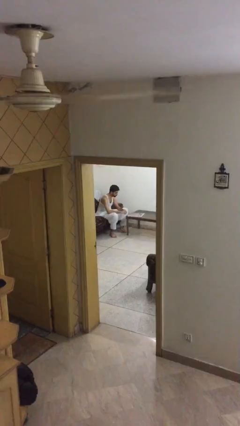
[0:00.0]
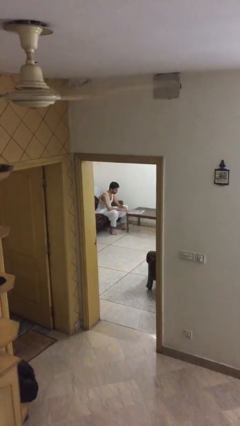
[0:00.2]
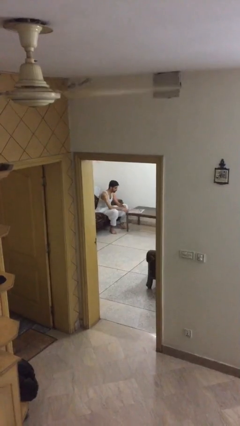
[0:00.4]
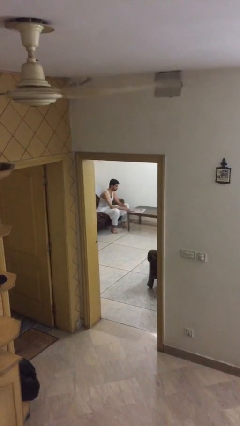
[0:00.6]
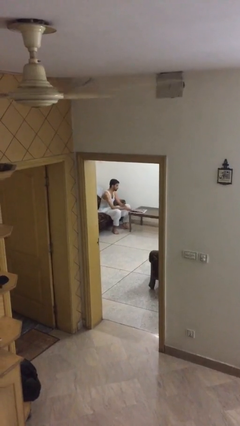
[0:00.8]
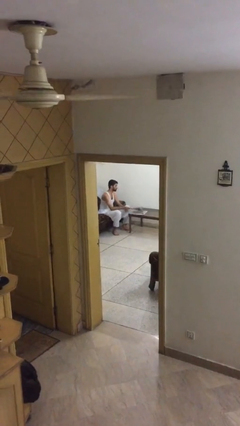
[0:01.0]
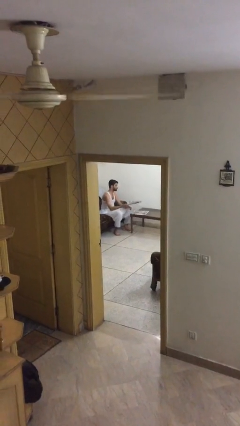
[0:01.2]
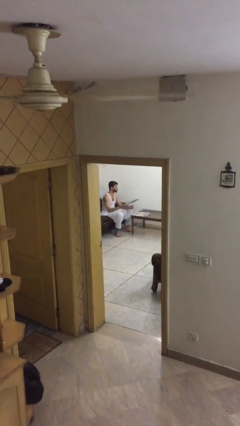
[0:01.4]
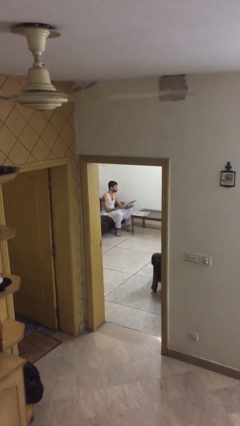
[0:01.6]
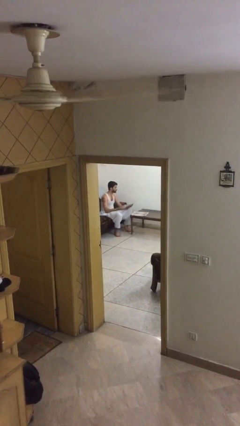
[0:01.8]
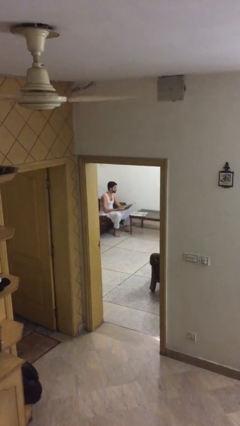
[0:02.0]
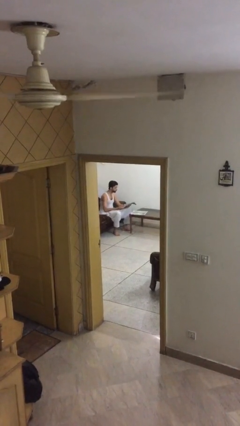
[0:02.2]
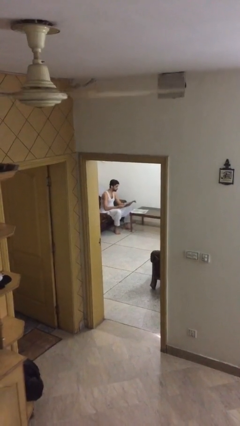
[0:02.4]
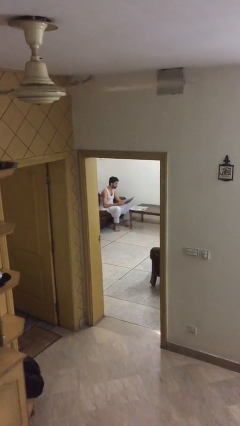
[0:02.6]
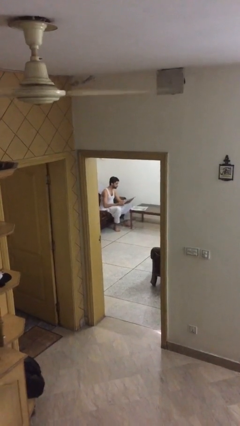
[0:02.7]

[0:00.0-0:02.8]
person picks up object from table

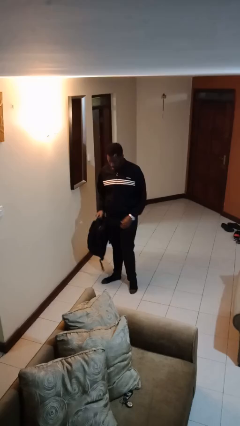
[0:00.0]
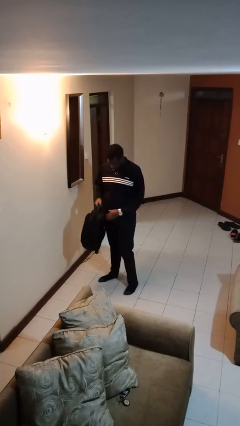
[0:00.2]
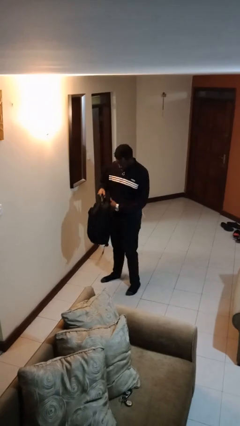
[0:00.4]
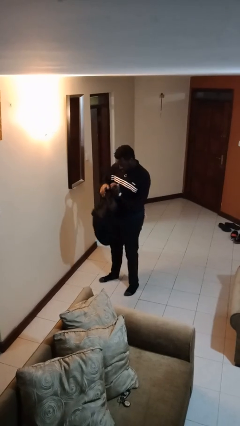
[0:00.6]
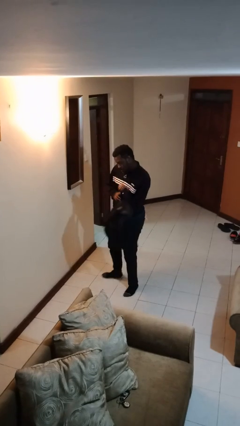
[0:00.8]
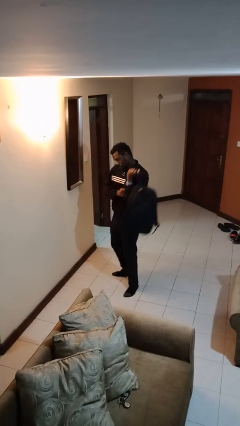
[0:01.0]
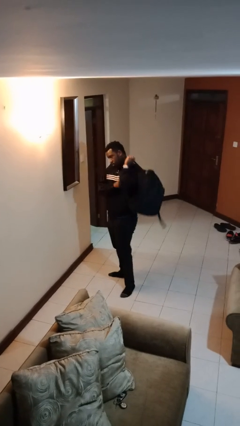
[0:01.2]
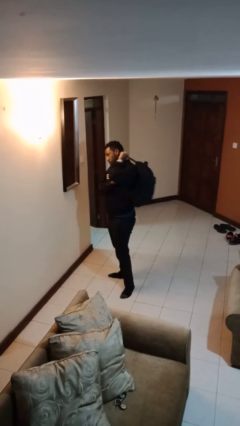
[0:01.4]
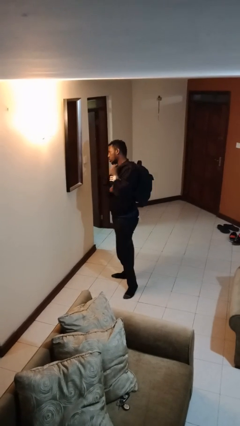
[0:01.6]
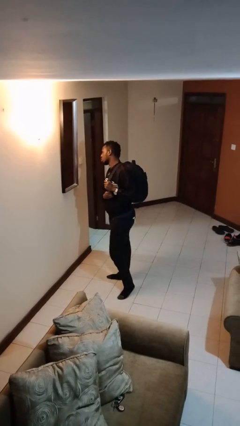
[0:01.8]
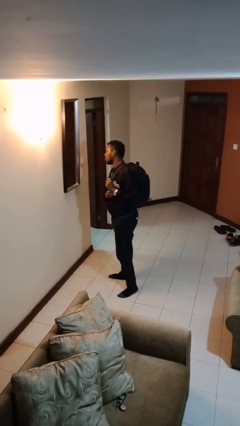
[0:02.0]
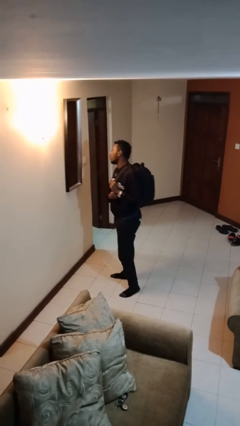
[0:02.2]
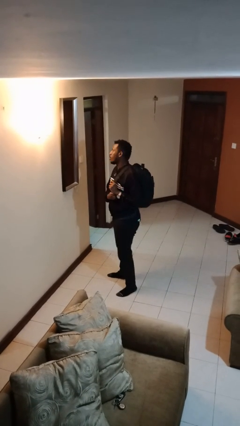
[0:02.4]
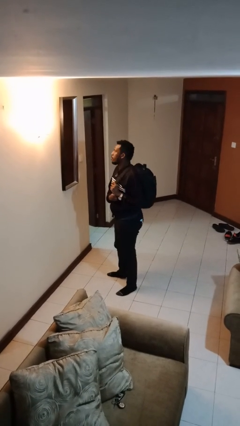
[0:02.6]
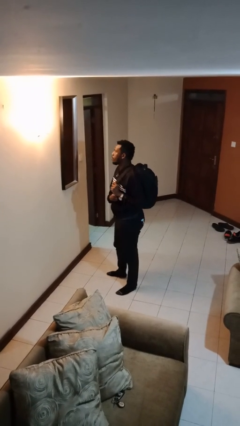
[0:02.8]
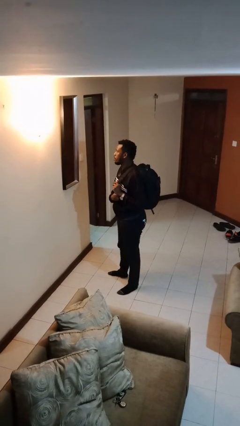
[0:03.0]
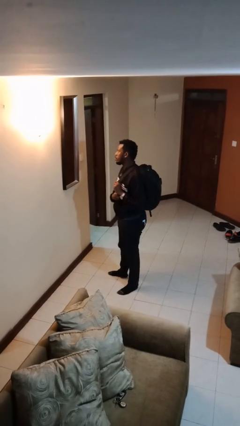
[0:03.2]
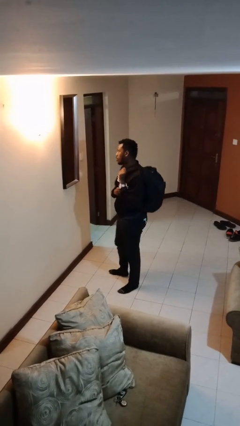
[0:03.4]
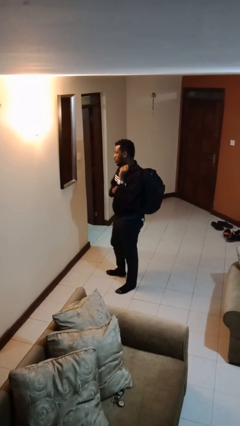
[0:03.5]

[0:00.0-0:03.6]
person puts on backpack

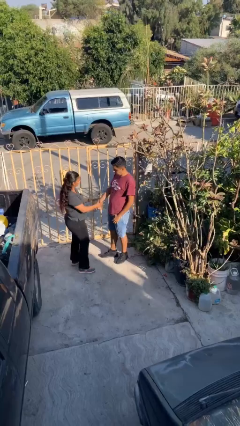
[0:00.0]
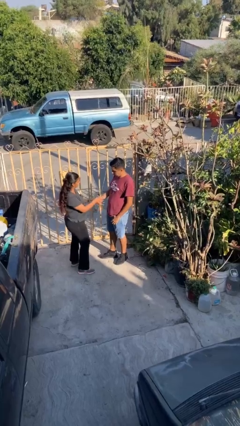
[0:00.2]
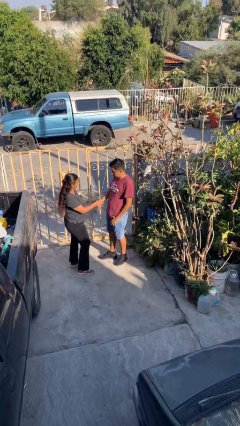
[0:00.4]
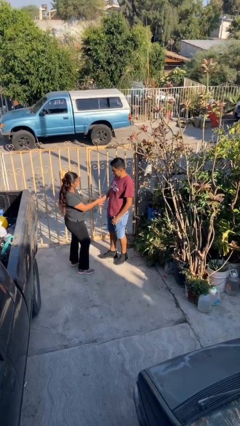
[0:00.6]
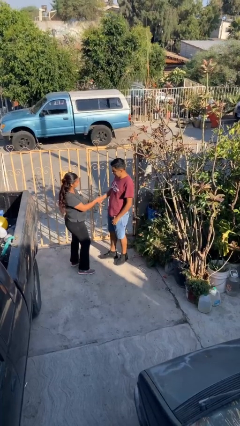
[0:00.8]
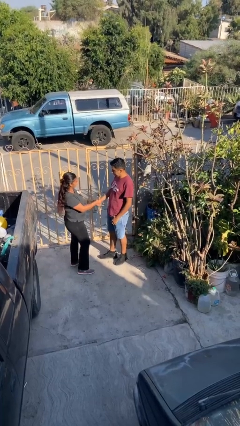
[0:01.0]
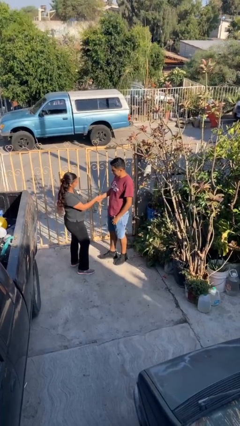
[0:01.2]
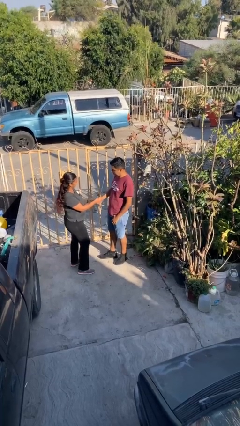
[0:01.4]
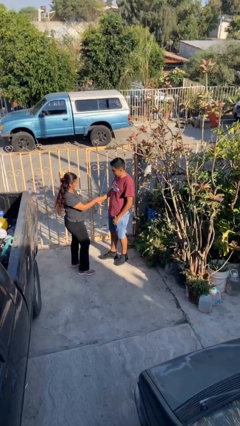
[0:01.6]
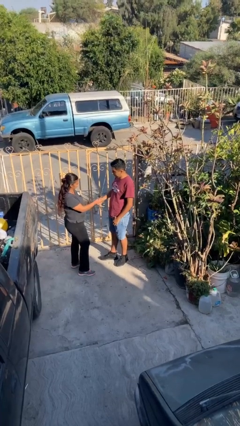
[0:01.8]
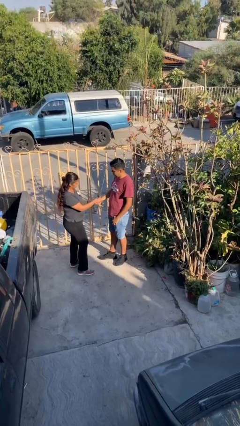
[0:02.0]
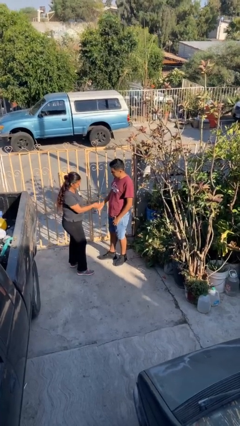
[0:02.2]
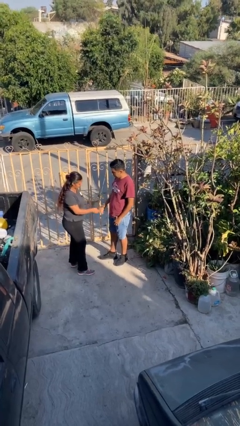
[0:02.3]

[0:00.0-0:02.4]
person shakes hand

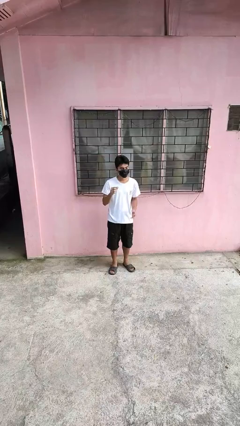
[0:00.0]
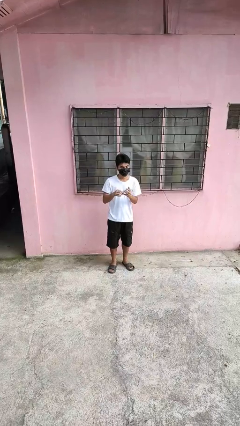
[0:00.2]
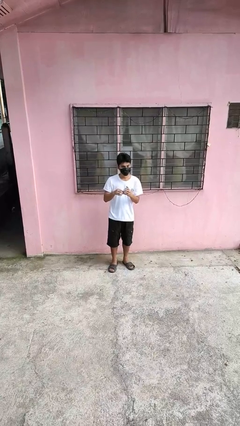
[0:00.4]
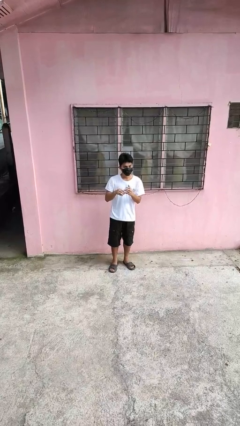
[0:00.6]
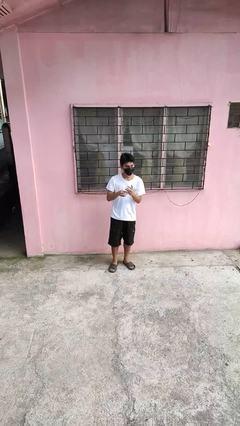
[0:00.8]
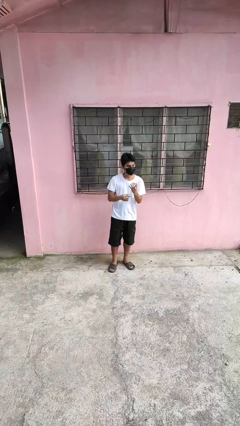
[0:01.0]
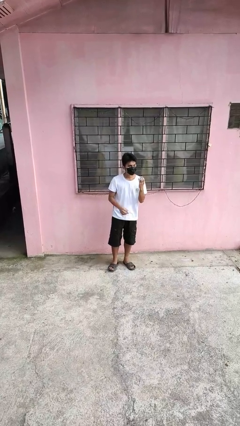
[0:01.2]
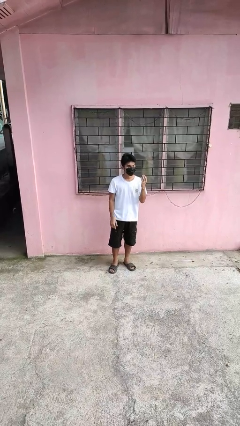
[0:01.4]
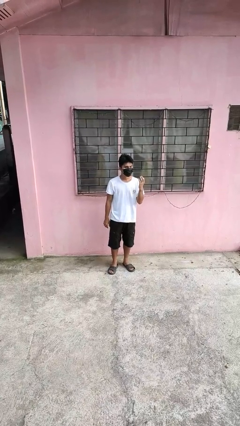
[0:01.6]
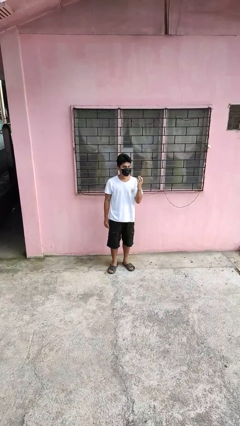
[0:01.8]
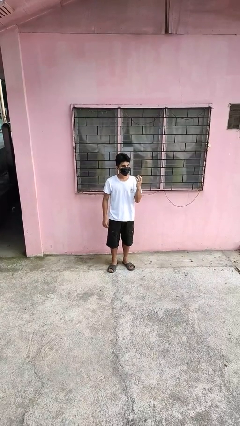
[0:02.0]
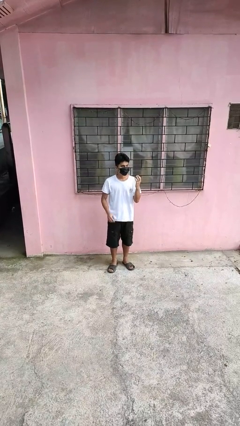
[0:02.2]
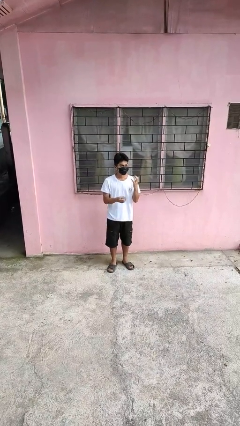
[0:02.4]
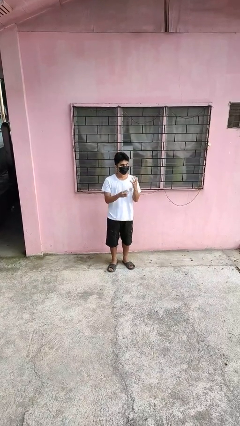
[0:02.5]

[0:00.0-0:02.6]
person puts on ring

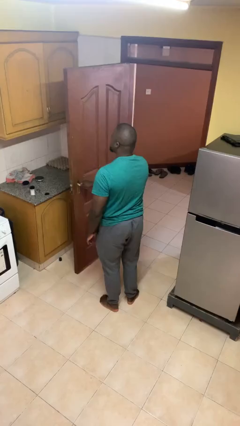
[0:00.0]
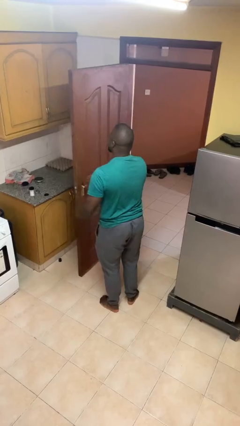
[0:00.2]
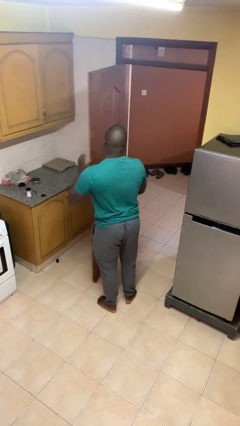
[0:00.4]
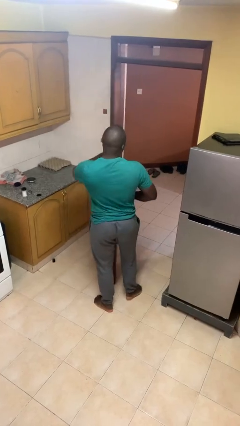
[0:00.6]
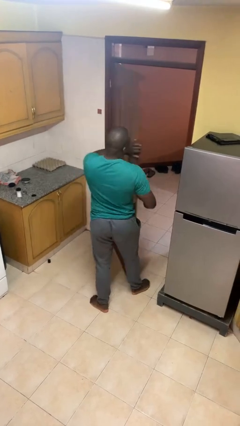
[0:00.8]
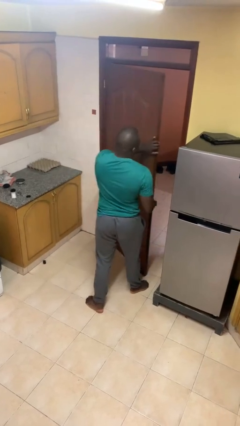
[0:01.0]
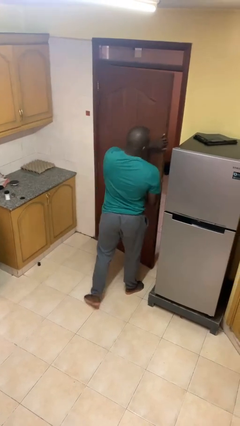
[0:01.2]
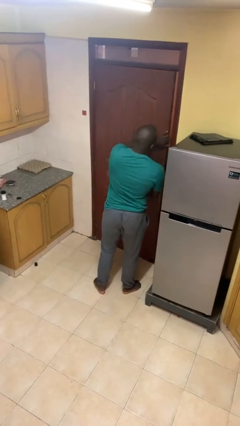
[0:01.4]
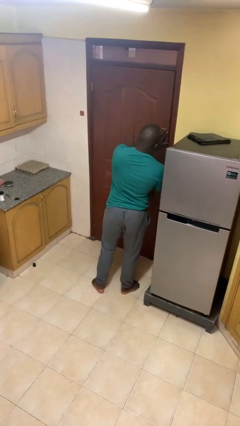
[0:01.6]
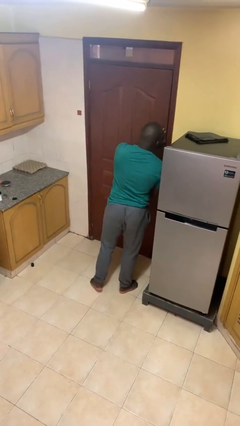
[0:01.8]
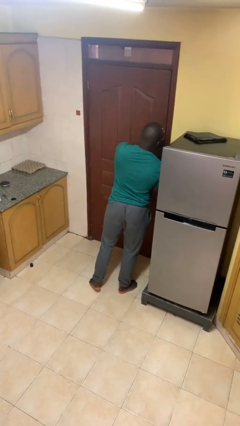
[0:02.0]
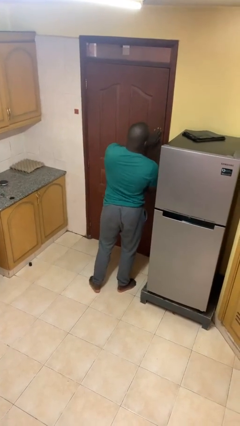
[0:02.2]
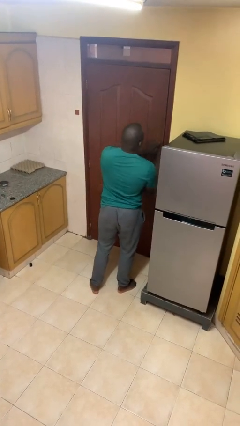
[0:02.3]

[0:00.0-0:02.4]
person closes facility door

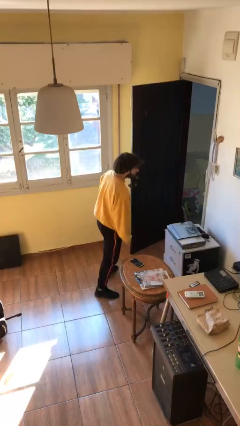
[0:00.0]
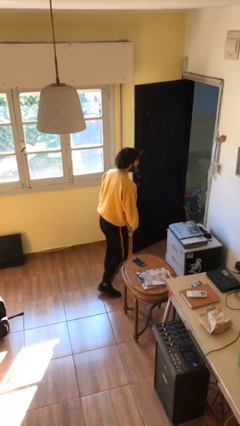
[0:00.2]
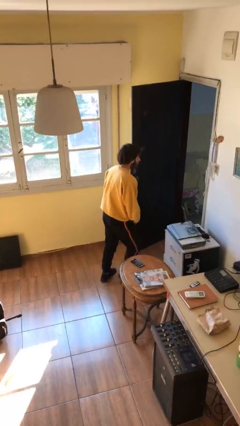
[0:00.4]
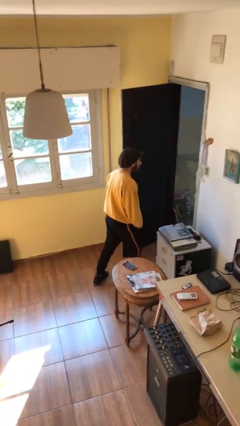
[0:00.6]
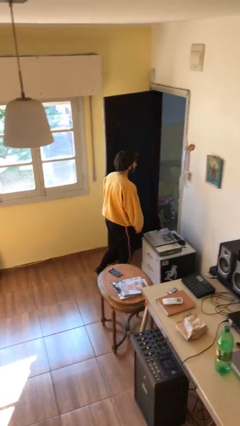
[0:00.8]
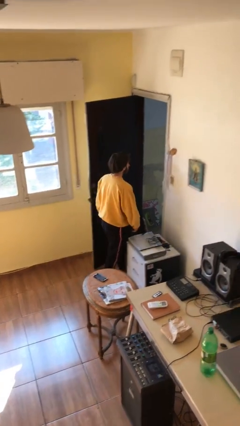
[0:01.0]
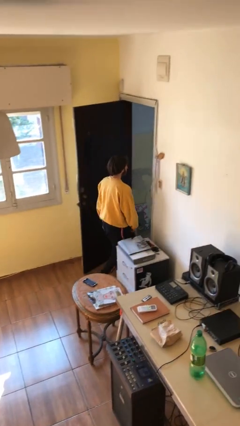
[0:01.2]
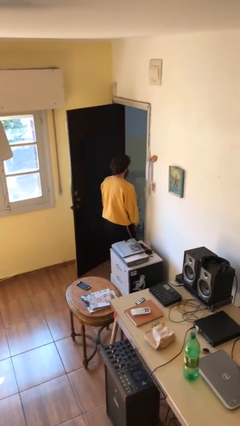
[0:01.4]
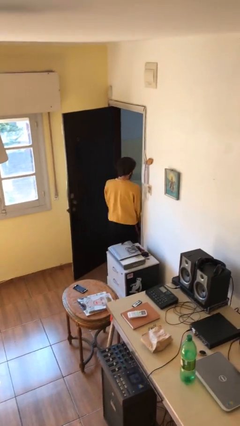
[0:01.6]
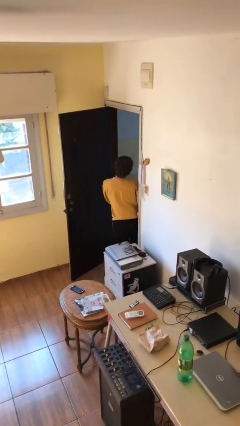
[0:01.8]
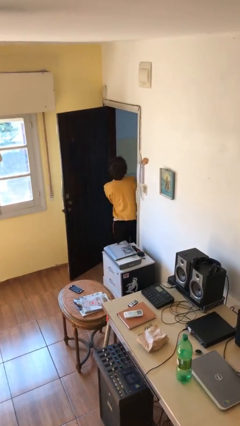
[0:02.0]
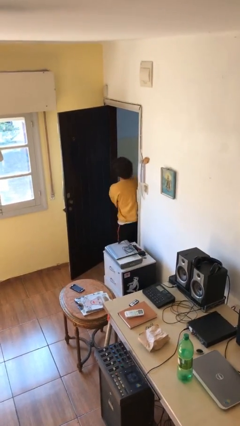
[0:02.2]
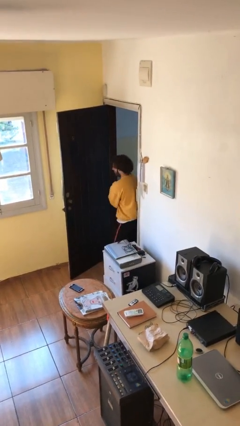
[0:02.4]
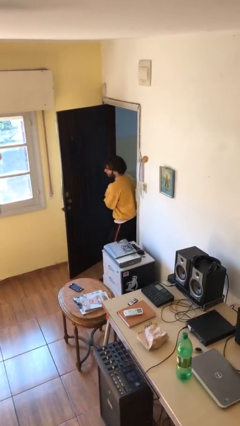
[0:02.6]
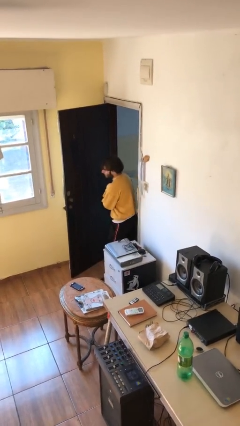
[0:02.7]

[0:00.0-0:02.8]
person bumps into wall

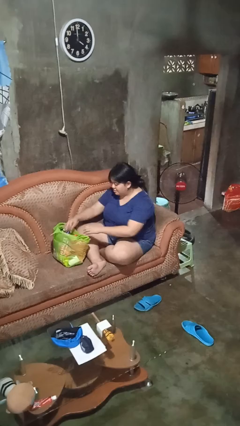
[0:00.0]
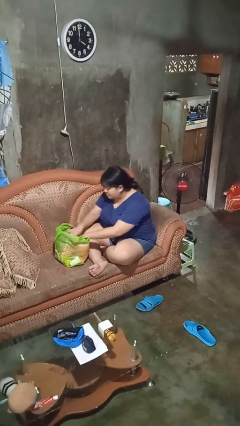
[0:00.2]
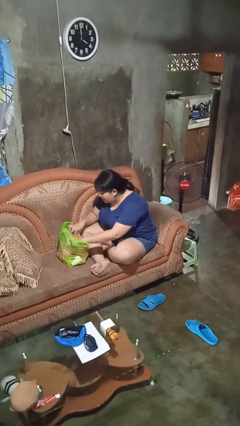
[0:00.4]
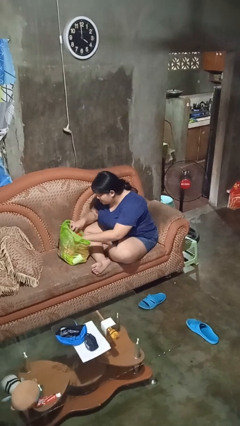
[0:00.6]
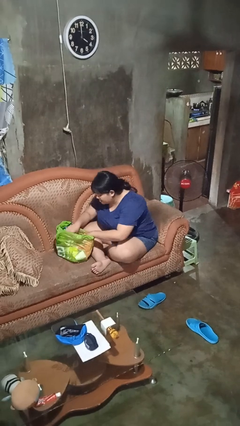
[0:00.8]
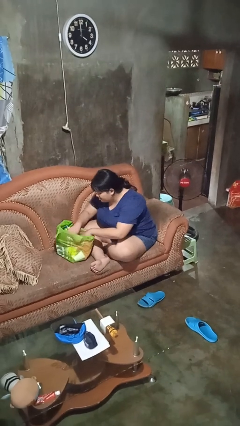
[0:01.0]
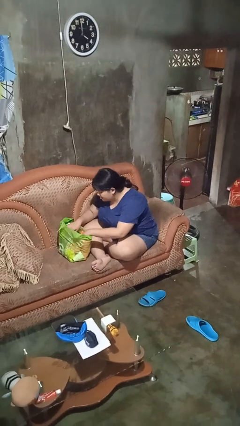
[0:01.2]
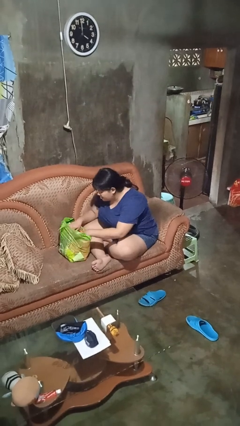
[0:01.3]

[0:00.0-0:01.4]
person searches in bag
